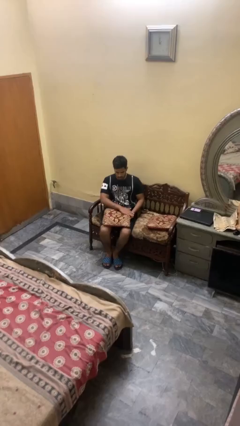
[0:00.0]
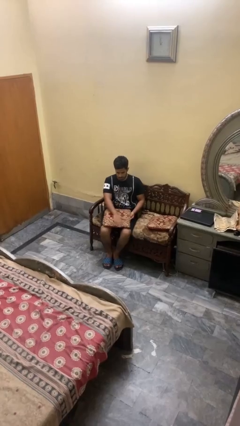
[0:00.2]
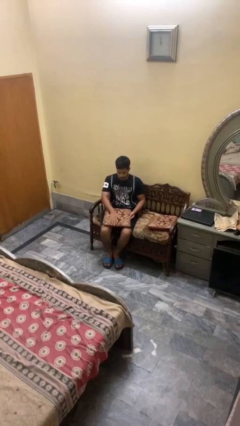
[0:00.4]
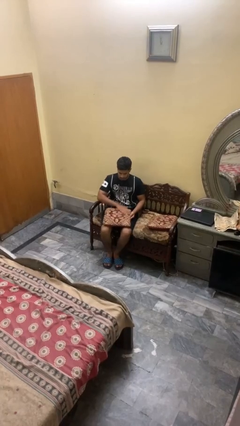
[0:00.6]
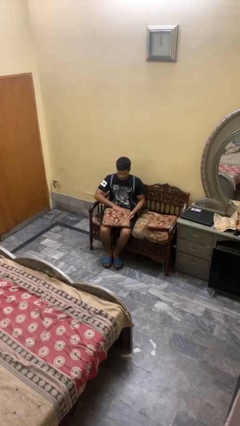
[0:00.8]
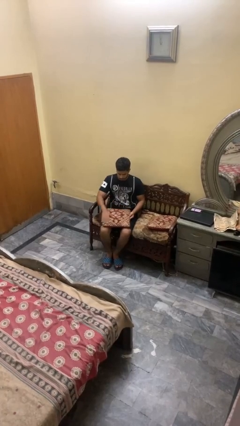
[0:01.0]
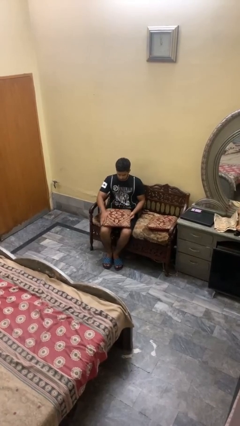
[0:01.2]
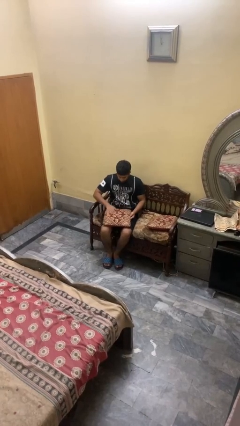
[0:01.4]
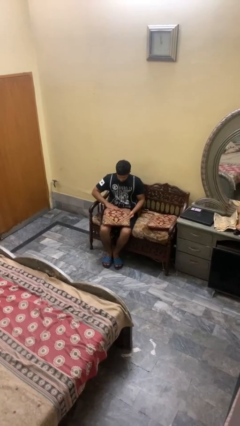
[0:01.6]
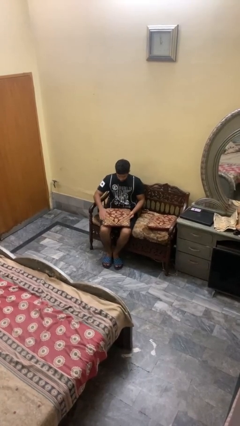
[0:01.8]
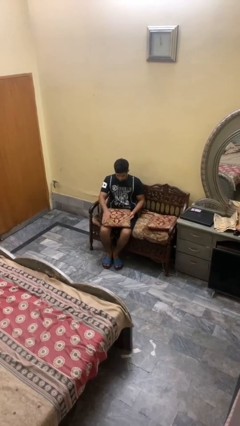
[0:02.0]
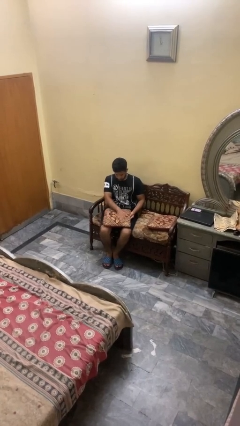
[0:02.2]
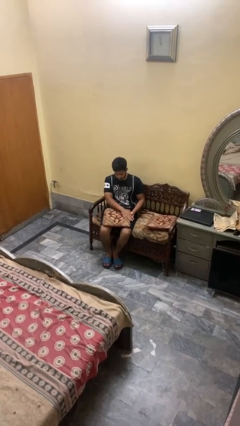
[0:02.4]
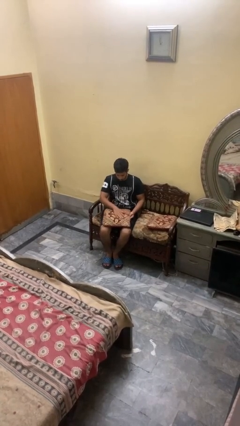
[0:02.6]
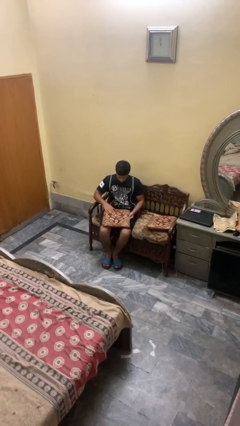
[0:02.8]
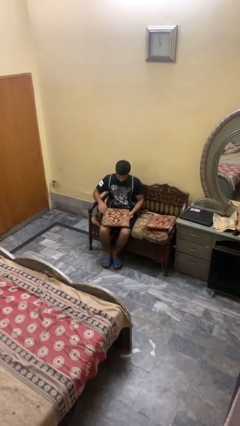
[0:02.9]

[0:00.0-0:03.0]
person waves hand over object

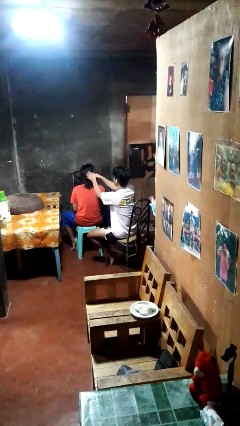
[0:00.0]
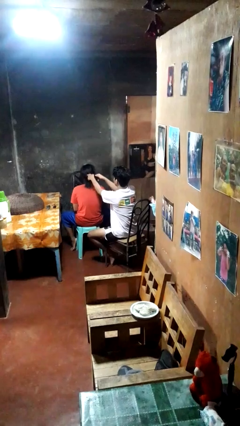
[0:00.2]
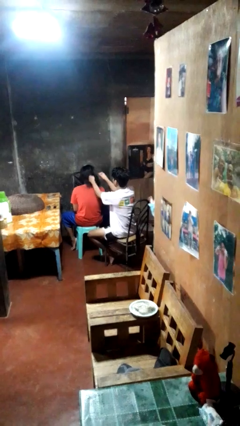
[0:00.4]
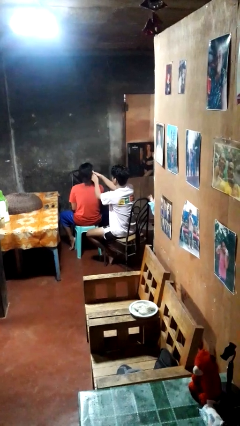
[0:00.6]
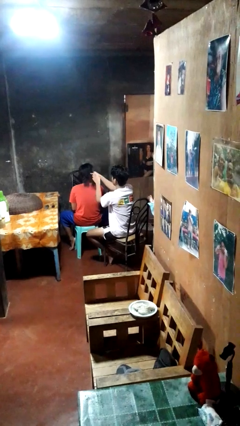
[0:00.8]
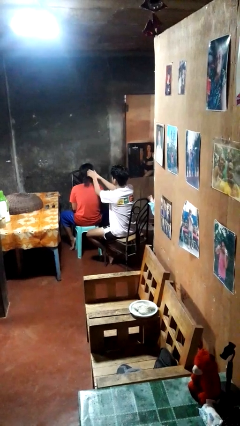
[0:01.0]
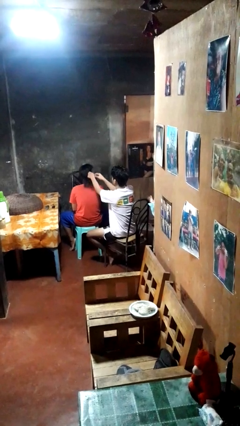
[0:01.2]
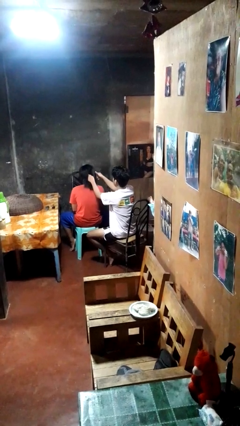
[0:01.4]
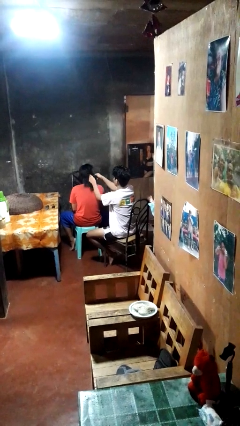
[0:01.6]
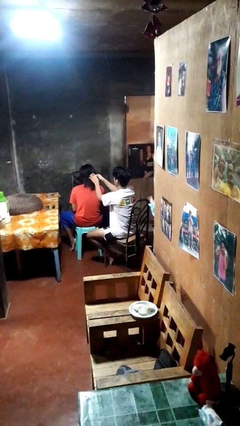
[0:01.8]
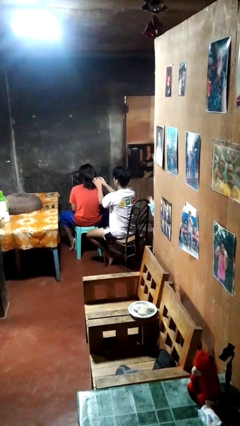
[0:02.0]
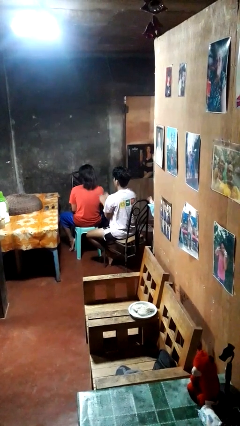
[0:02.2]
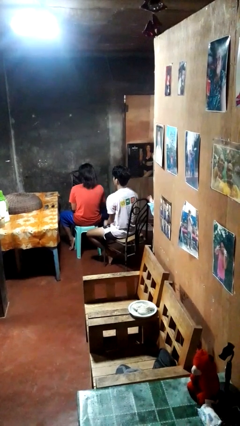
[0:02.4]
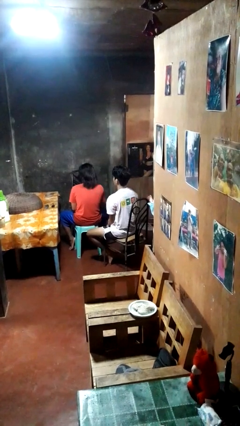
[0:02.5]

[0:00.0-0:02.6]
person braids hair of person

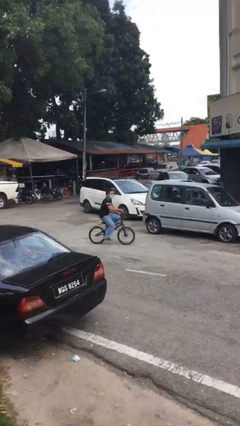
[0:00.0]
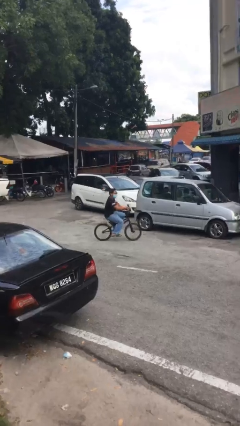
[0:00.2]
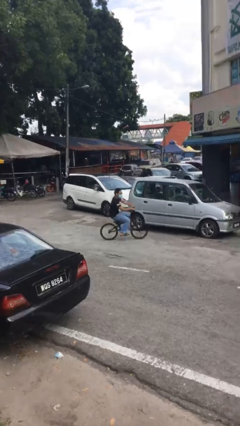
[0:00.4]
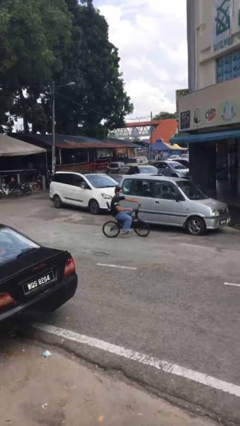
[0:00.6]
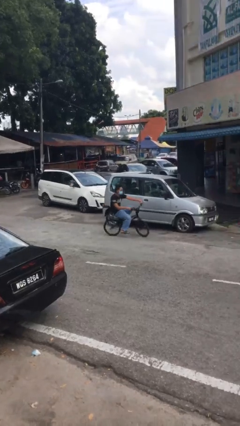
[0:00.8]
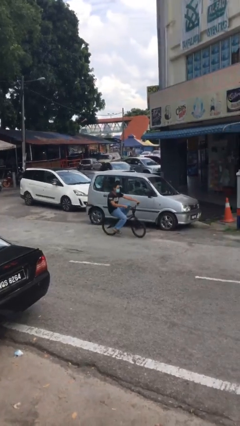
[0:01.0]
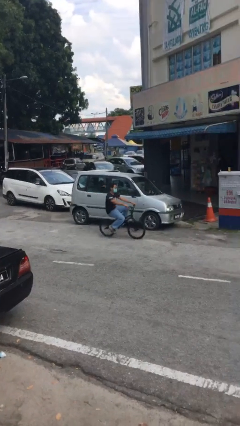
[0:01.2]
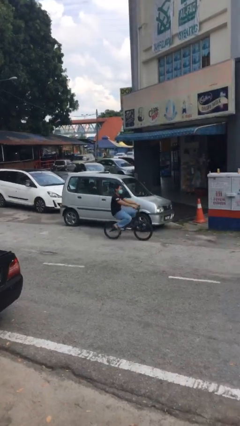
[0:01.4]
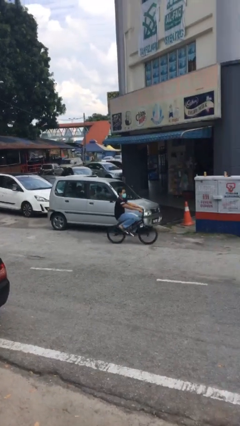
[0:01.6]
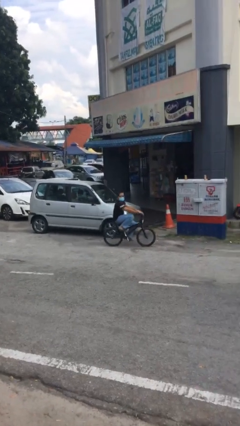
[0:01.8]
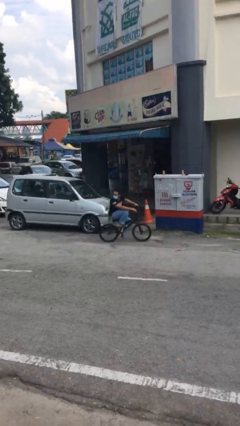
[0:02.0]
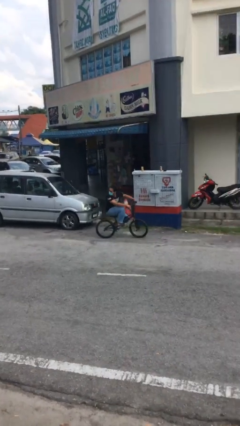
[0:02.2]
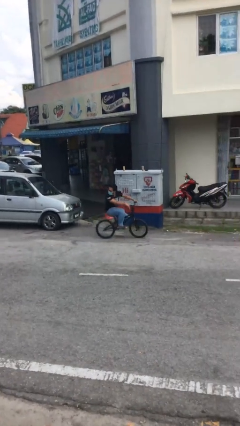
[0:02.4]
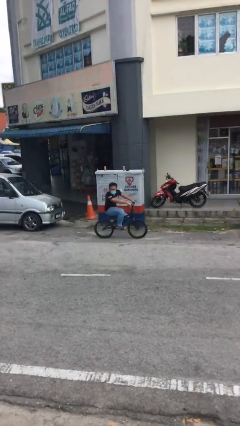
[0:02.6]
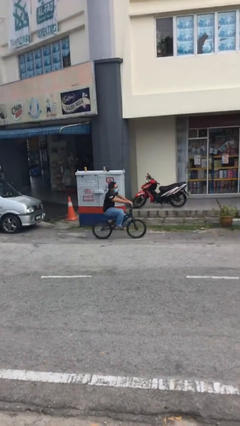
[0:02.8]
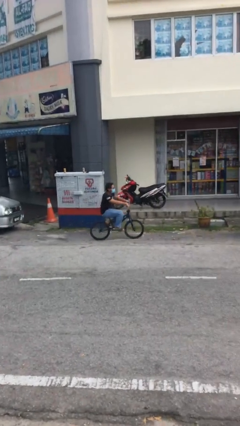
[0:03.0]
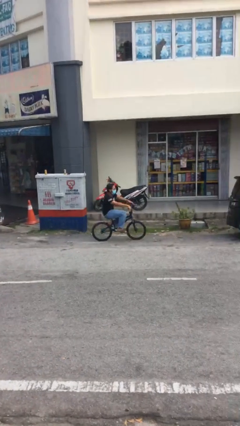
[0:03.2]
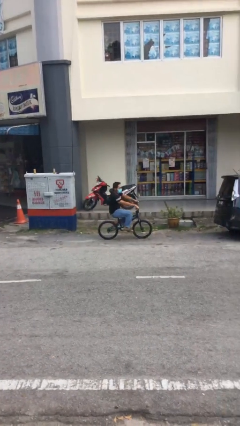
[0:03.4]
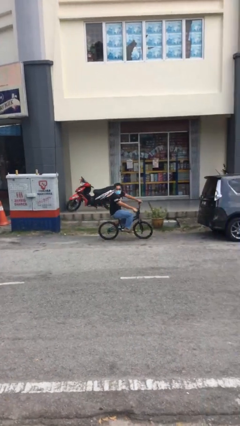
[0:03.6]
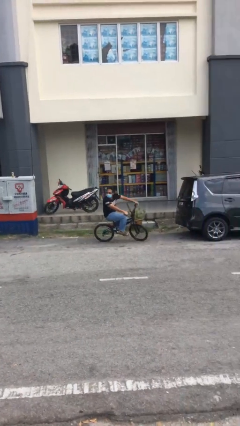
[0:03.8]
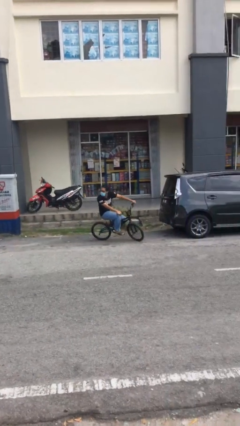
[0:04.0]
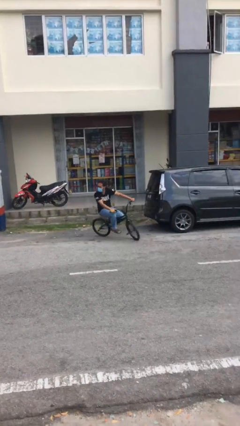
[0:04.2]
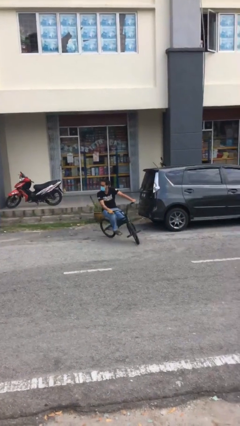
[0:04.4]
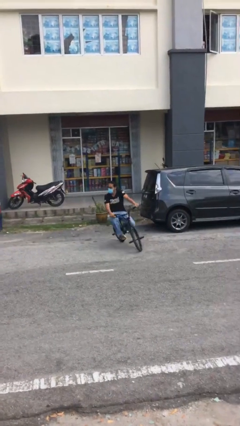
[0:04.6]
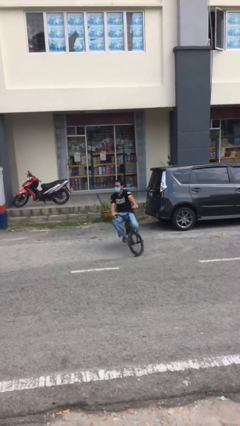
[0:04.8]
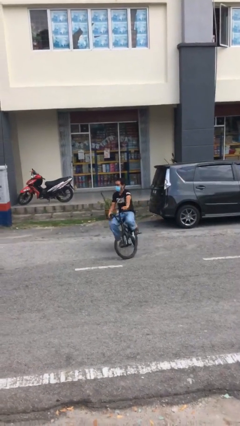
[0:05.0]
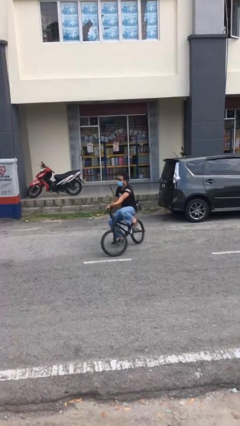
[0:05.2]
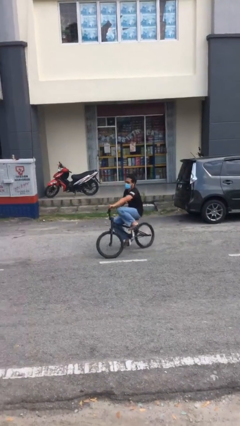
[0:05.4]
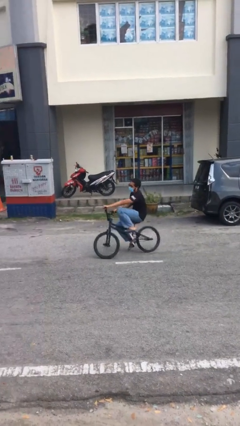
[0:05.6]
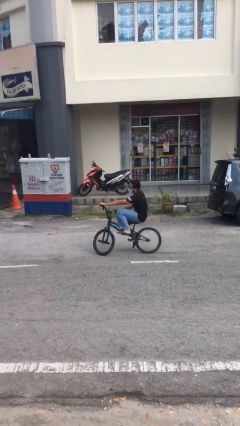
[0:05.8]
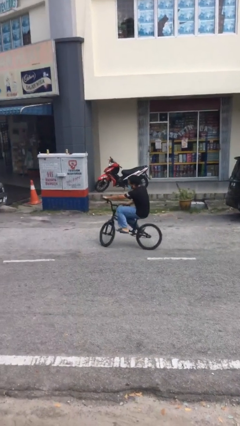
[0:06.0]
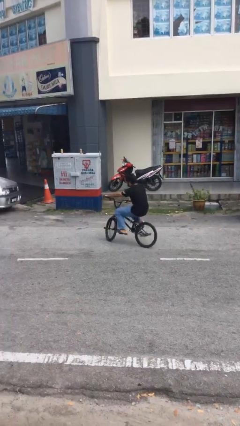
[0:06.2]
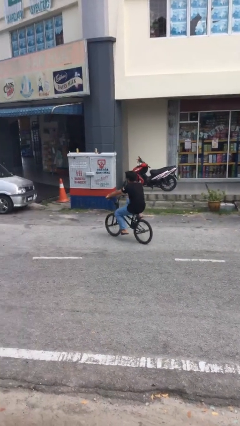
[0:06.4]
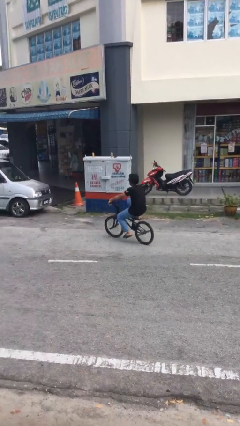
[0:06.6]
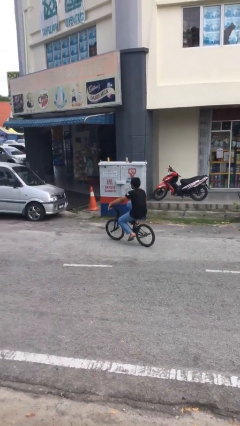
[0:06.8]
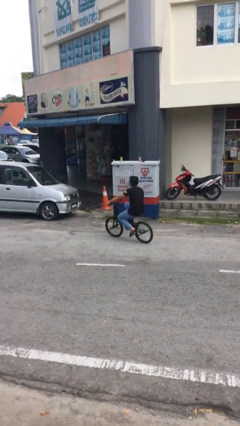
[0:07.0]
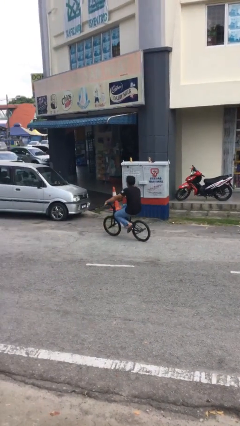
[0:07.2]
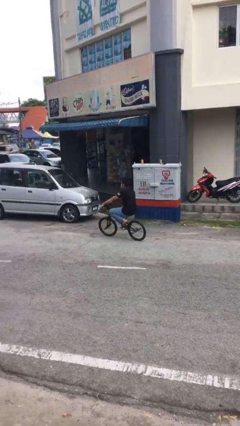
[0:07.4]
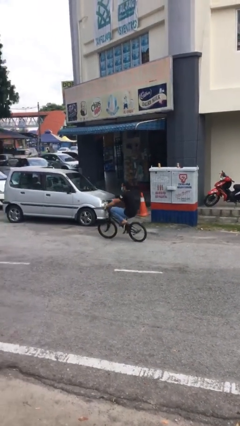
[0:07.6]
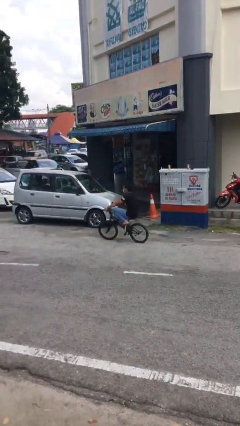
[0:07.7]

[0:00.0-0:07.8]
person rides bicycle

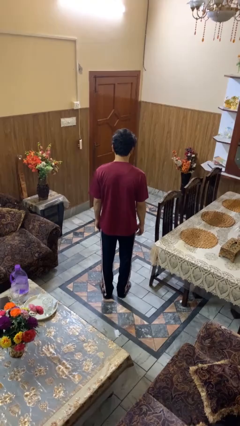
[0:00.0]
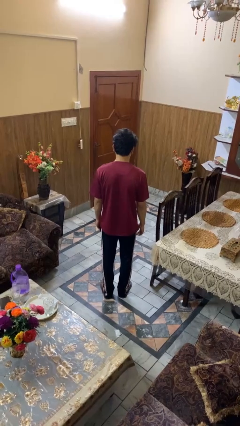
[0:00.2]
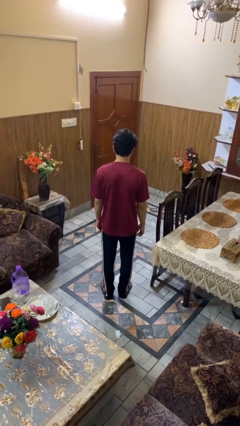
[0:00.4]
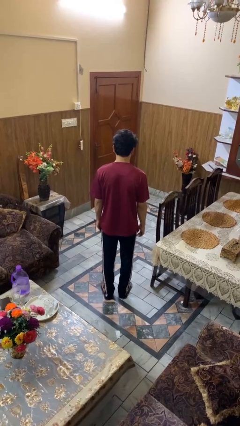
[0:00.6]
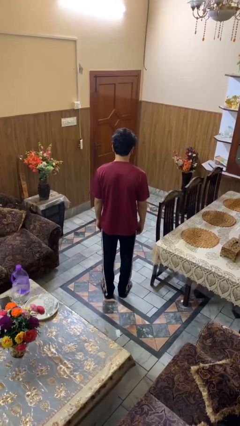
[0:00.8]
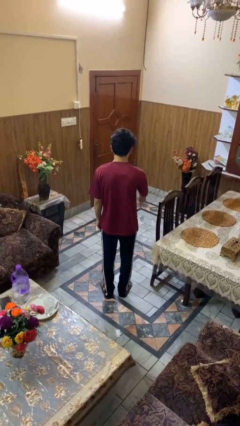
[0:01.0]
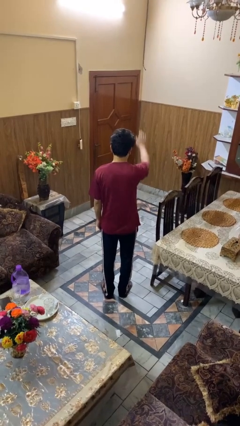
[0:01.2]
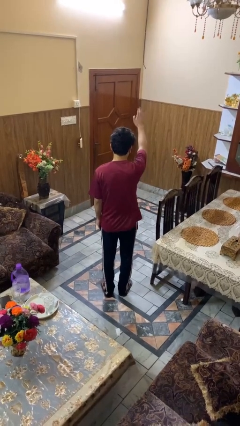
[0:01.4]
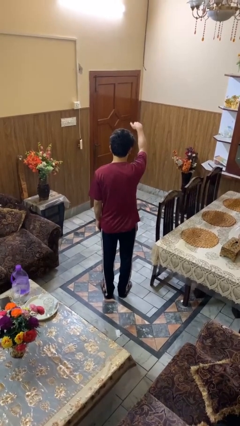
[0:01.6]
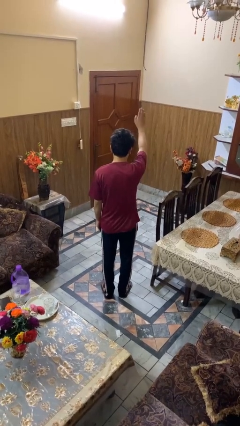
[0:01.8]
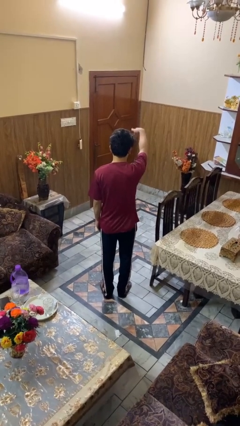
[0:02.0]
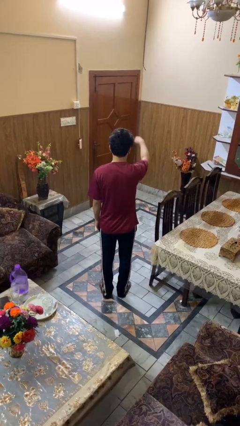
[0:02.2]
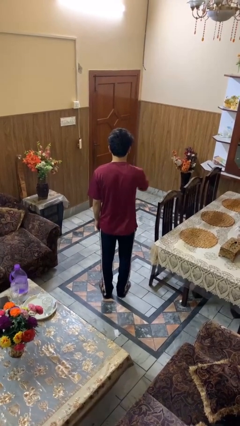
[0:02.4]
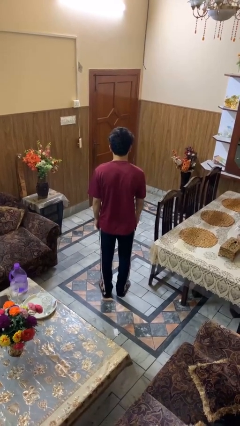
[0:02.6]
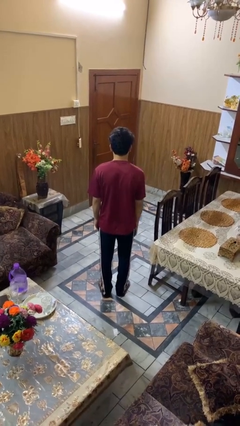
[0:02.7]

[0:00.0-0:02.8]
person gestures come here

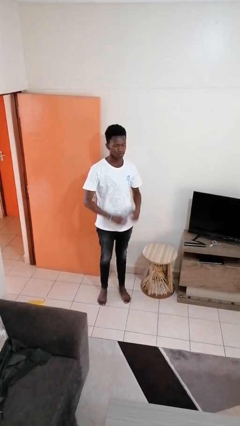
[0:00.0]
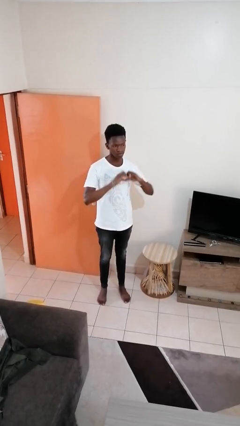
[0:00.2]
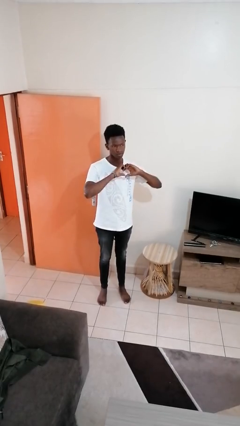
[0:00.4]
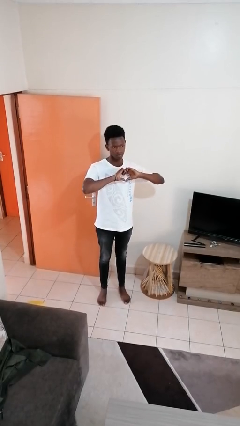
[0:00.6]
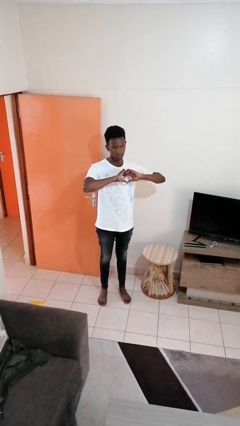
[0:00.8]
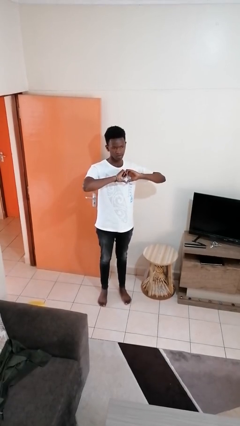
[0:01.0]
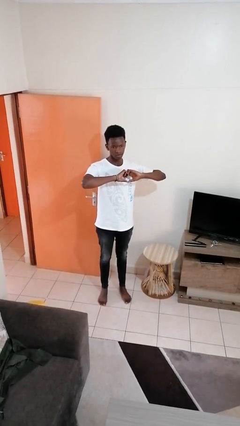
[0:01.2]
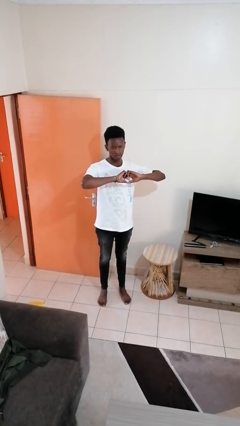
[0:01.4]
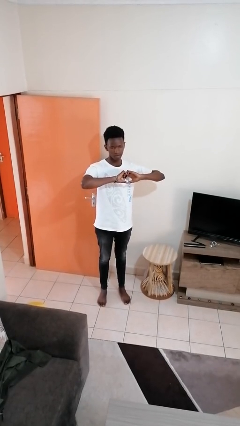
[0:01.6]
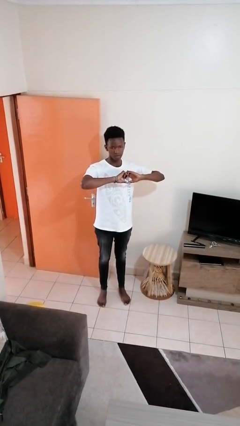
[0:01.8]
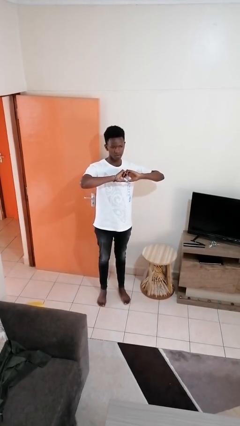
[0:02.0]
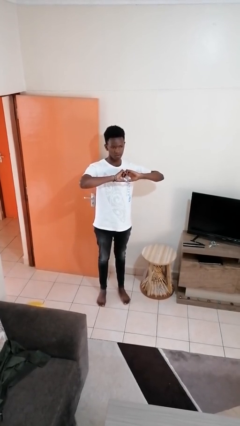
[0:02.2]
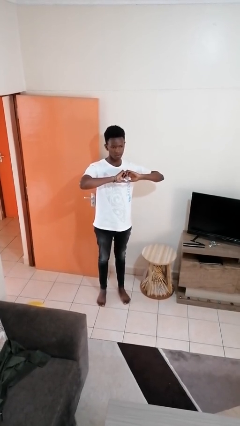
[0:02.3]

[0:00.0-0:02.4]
person gestures heart
